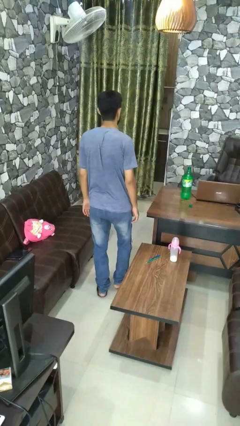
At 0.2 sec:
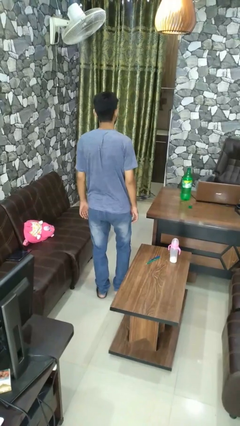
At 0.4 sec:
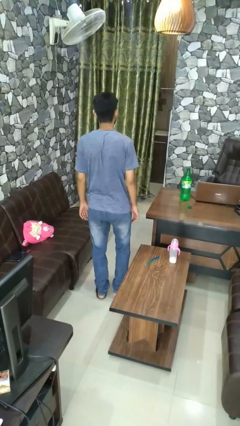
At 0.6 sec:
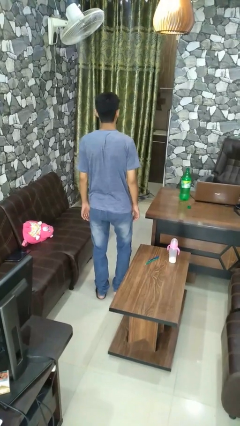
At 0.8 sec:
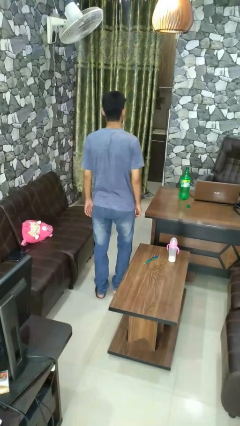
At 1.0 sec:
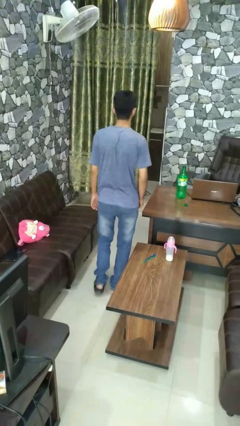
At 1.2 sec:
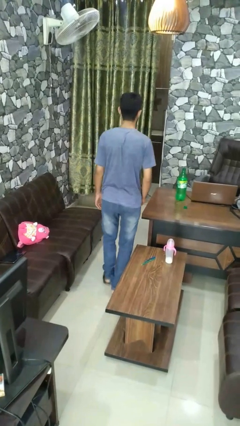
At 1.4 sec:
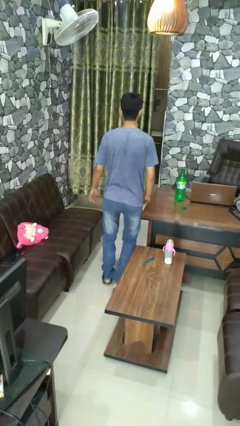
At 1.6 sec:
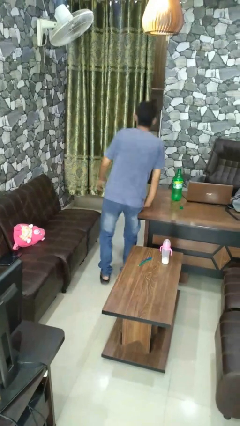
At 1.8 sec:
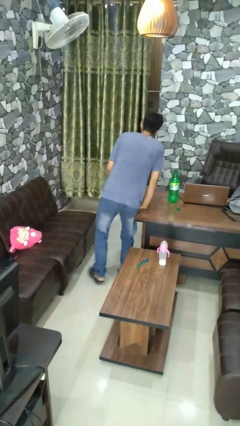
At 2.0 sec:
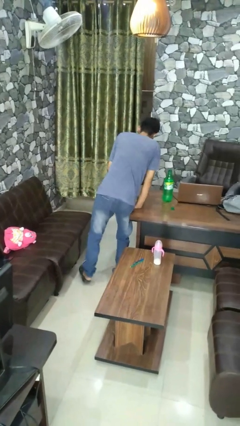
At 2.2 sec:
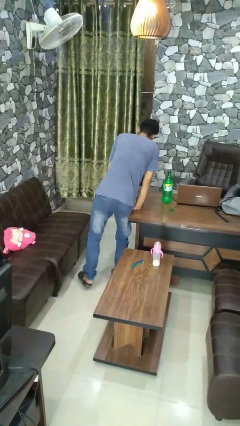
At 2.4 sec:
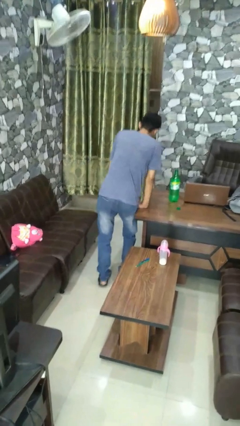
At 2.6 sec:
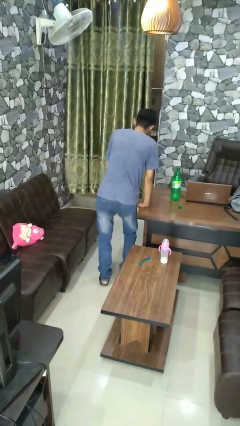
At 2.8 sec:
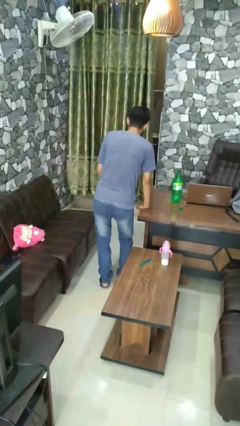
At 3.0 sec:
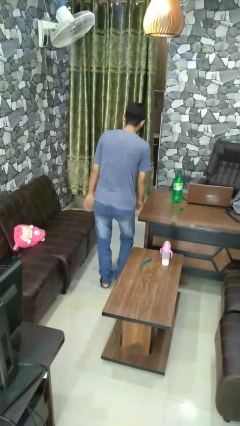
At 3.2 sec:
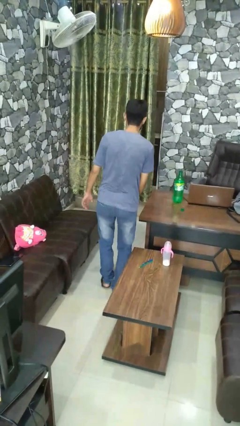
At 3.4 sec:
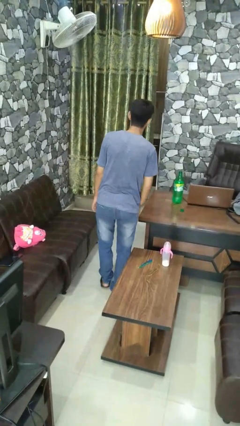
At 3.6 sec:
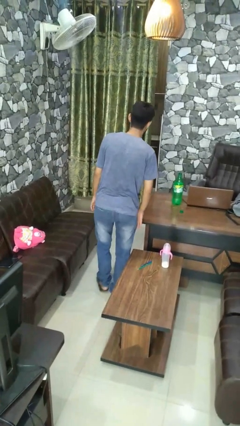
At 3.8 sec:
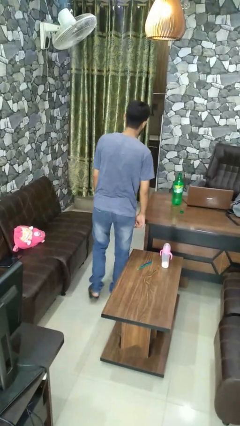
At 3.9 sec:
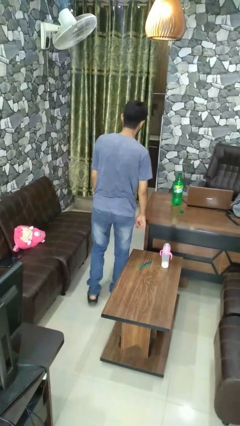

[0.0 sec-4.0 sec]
person bumps into table

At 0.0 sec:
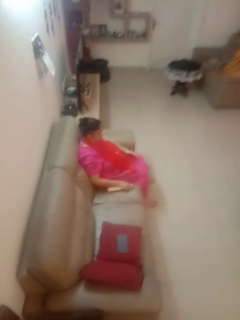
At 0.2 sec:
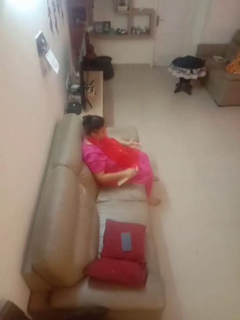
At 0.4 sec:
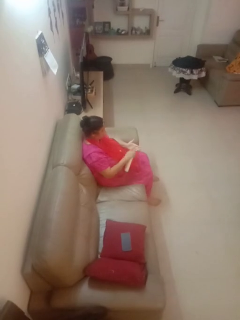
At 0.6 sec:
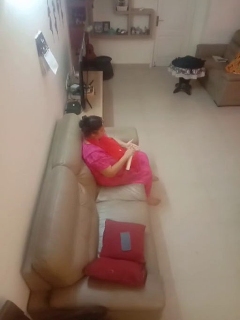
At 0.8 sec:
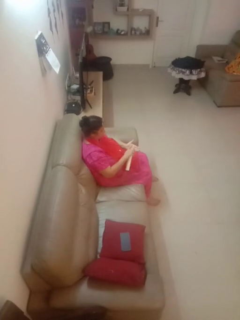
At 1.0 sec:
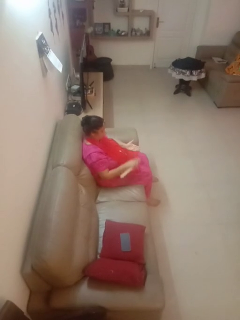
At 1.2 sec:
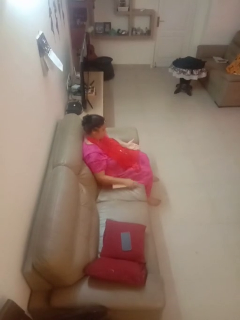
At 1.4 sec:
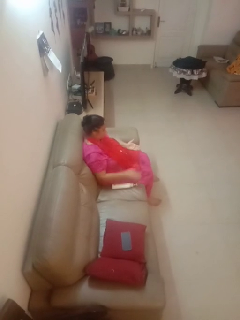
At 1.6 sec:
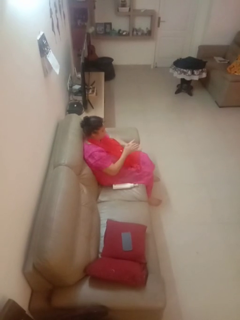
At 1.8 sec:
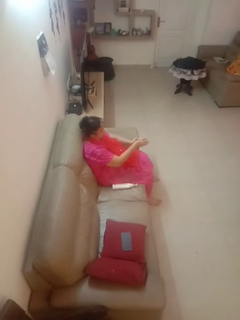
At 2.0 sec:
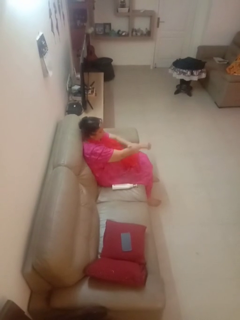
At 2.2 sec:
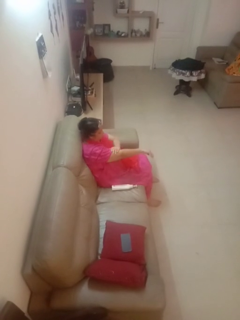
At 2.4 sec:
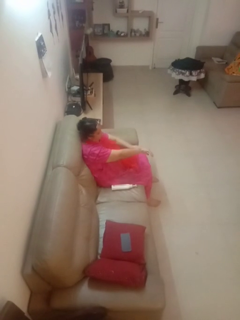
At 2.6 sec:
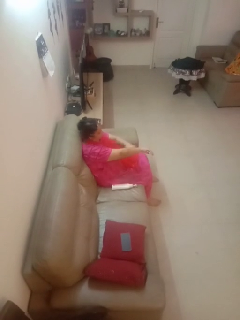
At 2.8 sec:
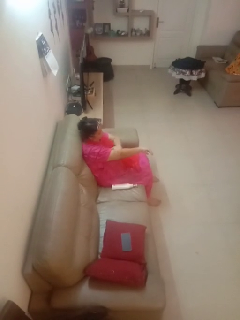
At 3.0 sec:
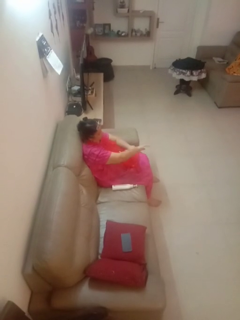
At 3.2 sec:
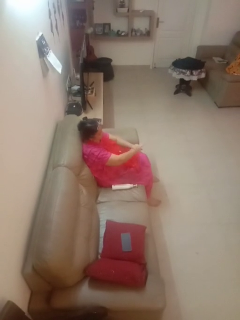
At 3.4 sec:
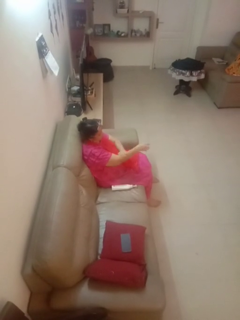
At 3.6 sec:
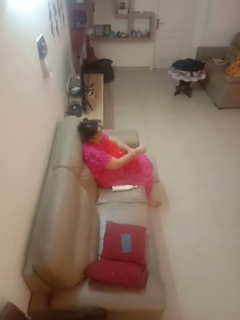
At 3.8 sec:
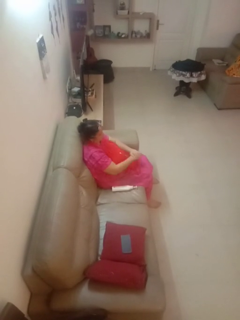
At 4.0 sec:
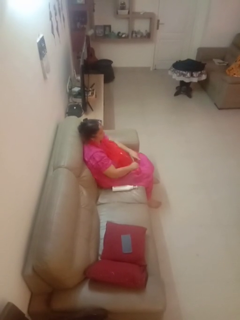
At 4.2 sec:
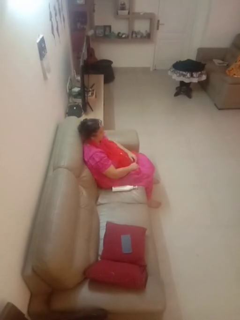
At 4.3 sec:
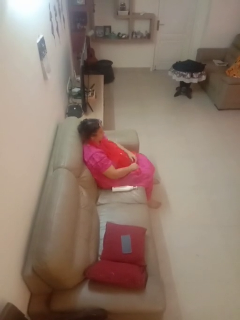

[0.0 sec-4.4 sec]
person applies sunscreen

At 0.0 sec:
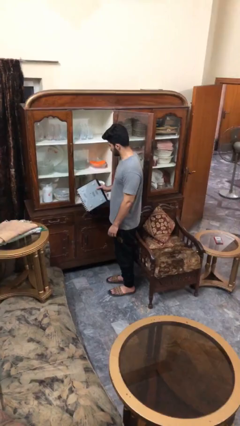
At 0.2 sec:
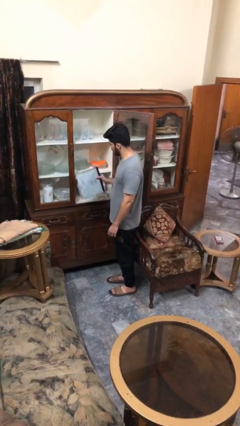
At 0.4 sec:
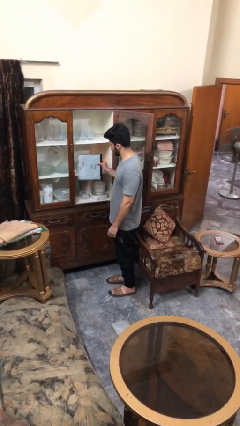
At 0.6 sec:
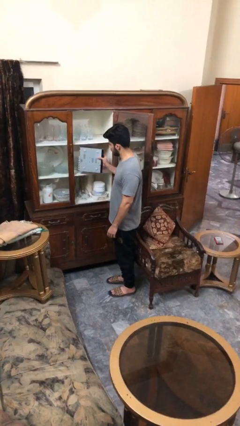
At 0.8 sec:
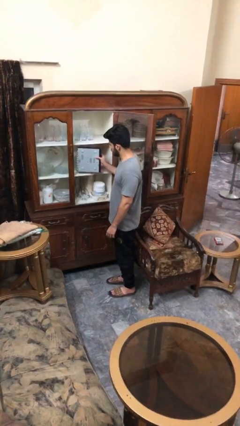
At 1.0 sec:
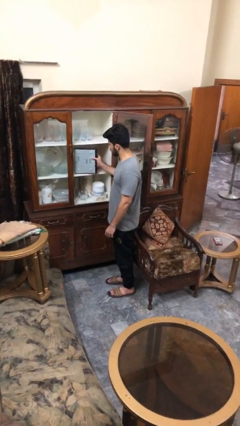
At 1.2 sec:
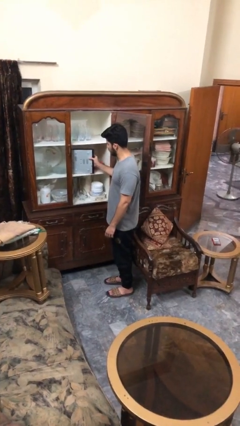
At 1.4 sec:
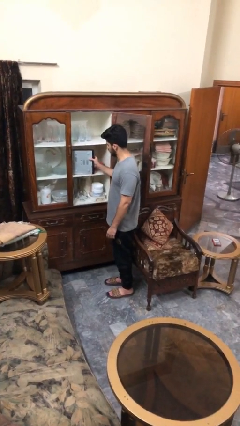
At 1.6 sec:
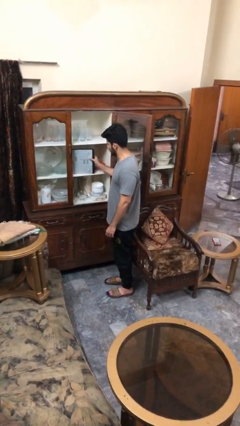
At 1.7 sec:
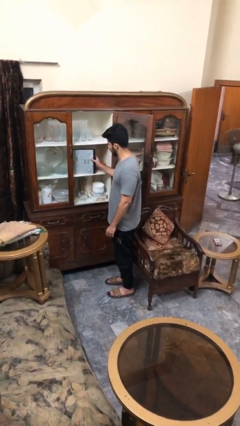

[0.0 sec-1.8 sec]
person puts down object into cabinet

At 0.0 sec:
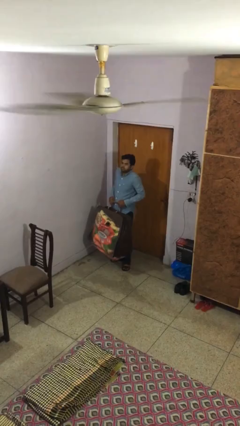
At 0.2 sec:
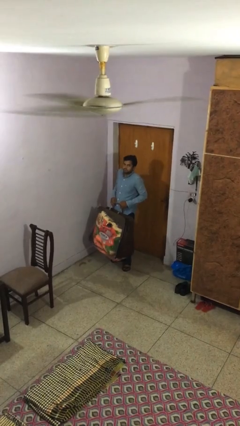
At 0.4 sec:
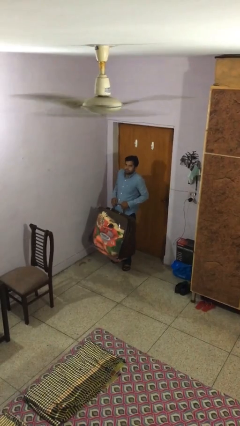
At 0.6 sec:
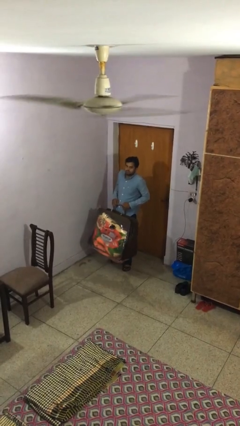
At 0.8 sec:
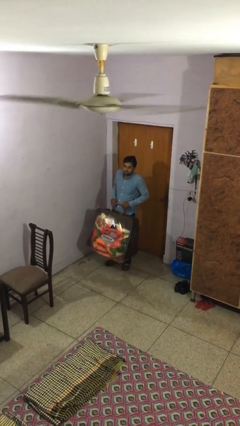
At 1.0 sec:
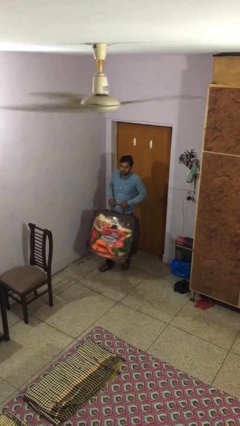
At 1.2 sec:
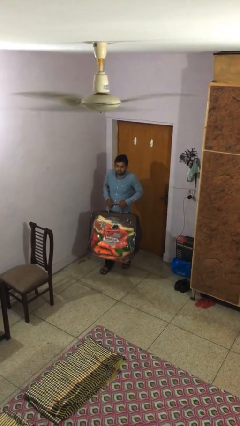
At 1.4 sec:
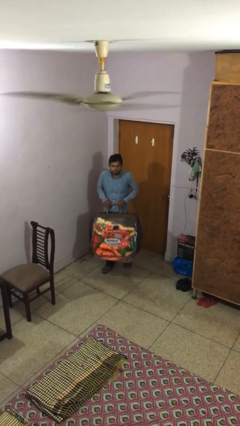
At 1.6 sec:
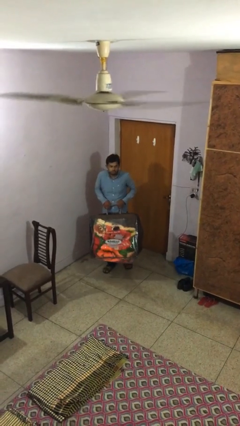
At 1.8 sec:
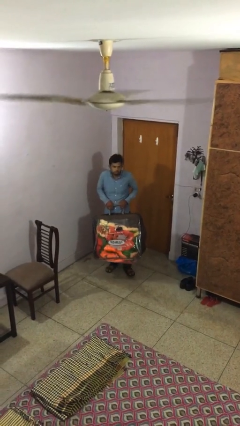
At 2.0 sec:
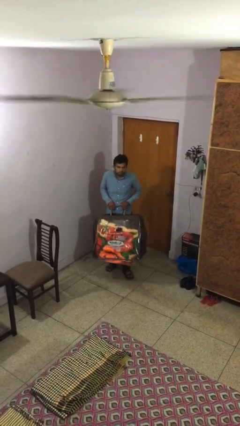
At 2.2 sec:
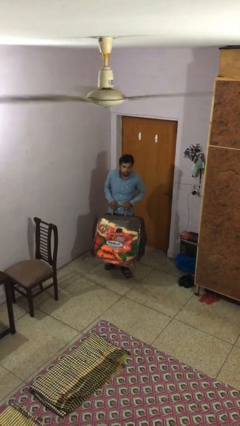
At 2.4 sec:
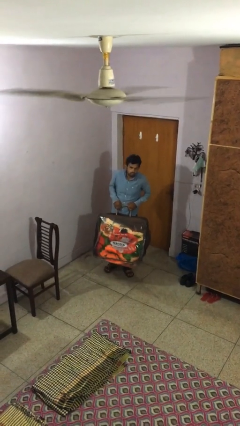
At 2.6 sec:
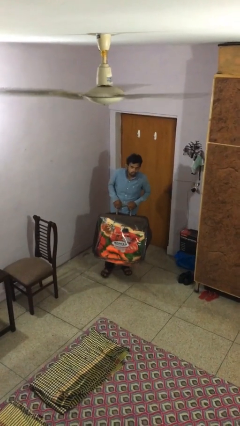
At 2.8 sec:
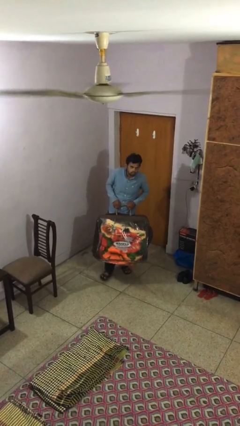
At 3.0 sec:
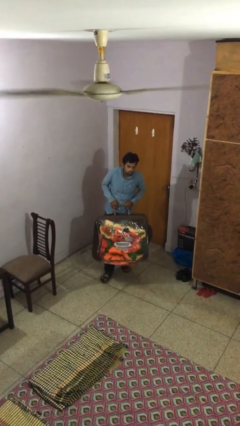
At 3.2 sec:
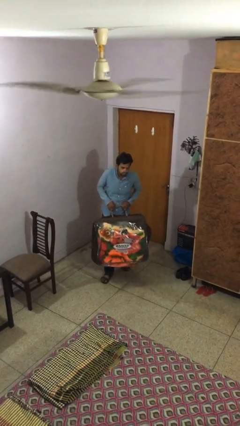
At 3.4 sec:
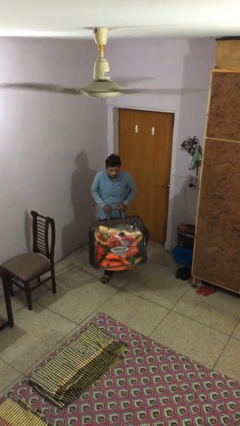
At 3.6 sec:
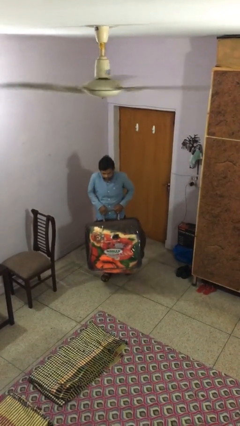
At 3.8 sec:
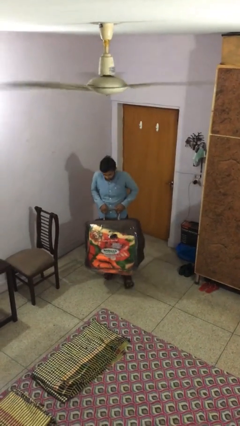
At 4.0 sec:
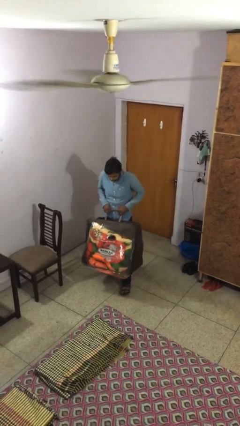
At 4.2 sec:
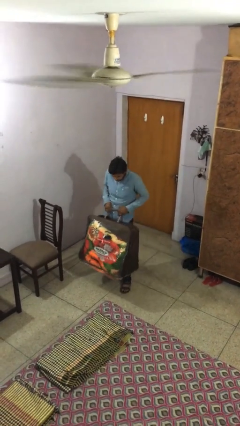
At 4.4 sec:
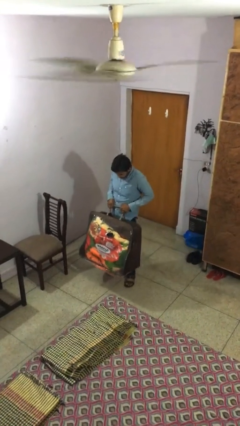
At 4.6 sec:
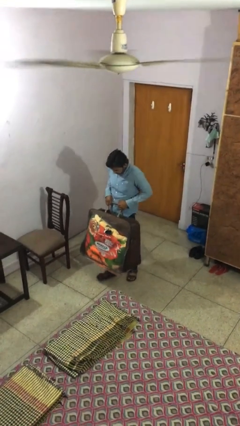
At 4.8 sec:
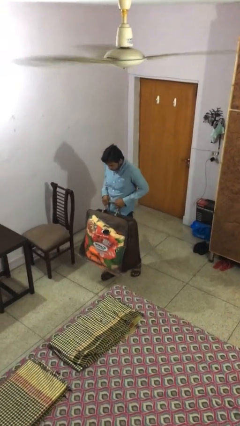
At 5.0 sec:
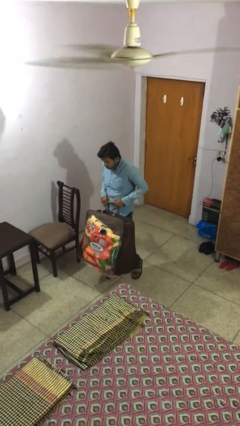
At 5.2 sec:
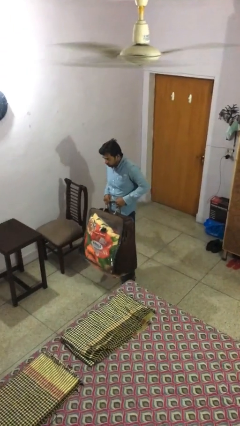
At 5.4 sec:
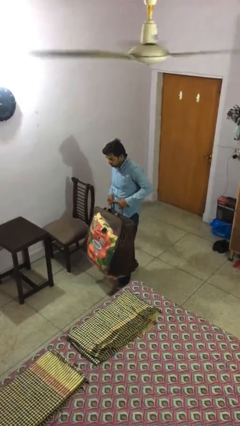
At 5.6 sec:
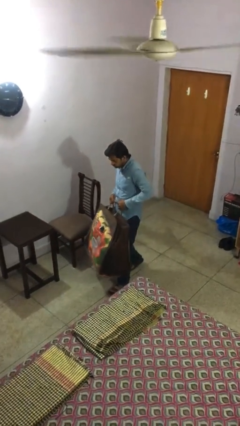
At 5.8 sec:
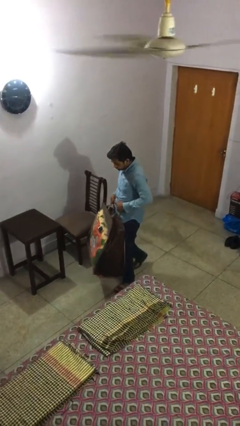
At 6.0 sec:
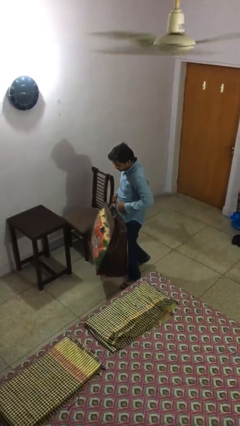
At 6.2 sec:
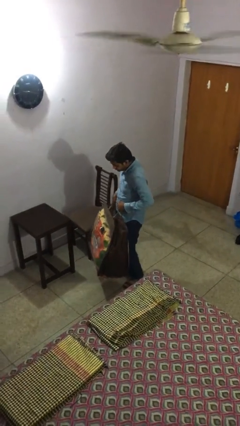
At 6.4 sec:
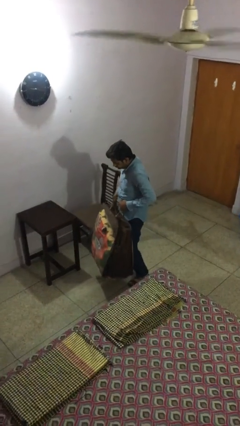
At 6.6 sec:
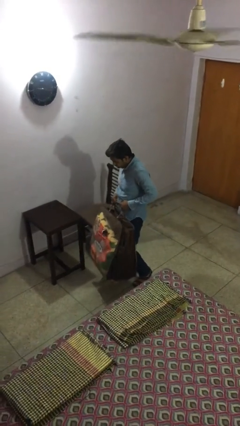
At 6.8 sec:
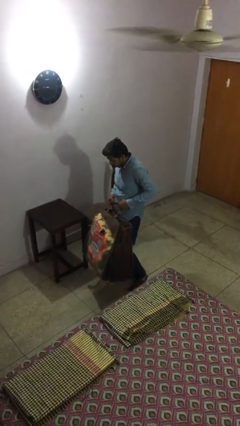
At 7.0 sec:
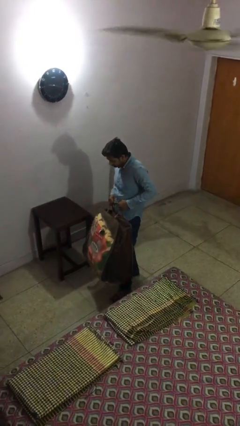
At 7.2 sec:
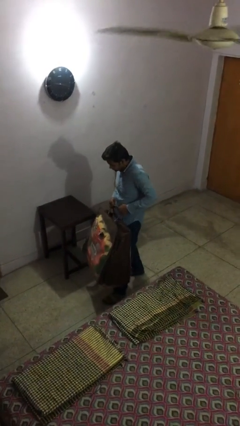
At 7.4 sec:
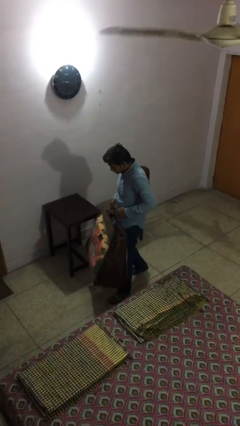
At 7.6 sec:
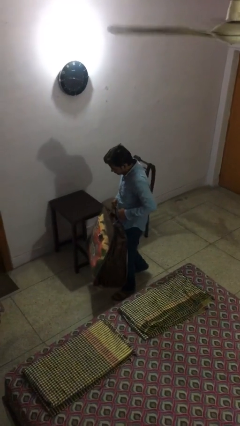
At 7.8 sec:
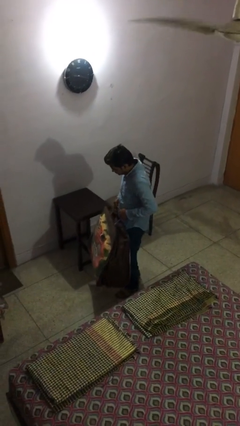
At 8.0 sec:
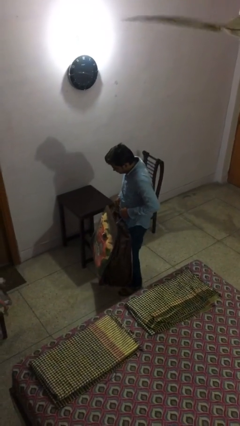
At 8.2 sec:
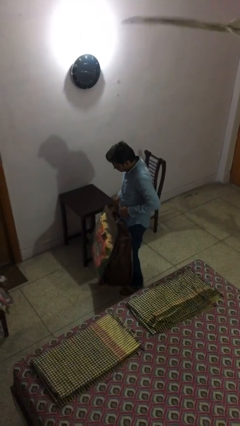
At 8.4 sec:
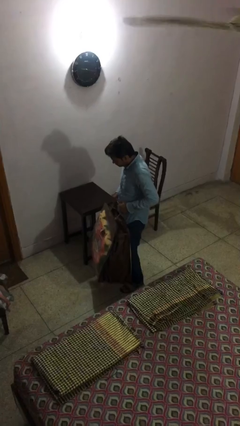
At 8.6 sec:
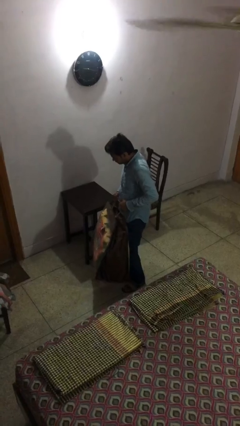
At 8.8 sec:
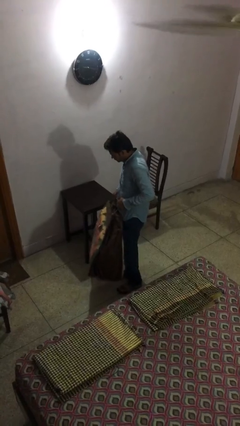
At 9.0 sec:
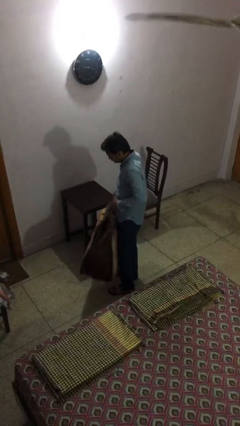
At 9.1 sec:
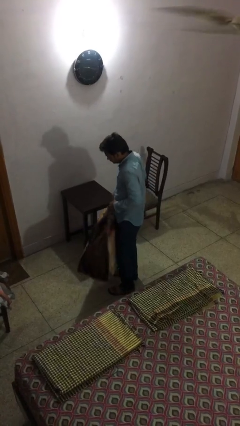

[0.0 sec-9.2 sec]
person carries heavy object
